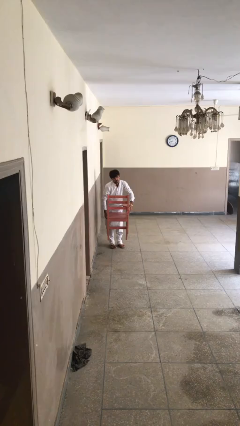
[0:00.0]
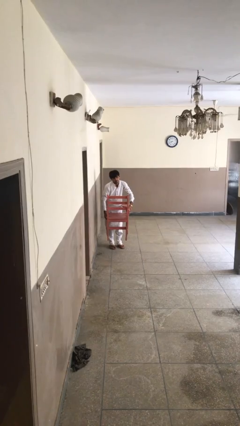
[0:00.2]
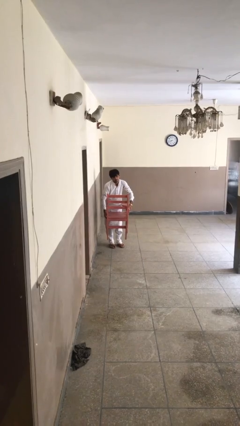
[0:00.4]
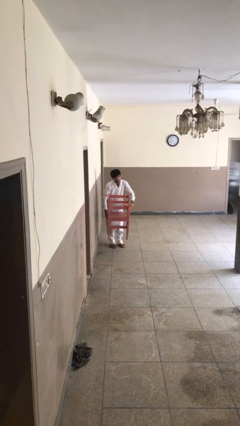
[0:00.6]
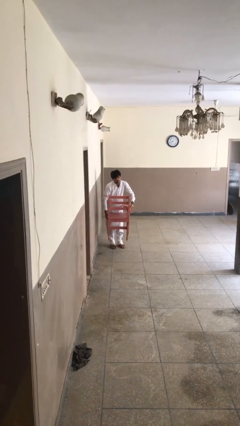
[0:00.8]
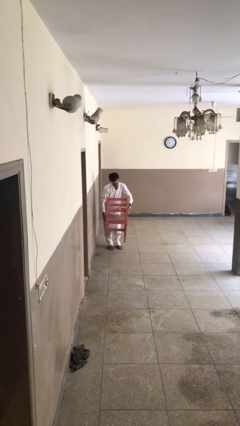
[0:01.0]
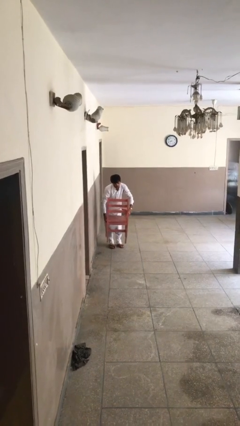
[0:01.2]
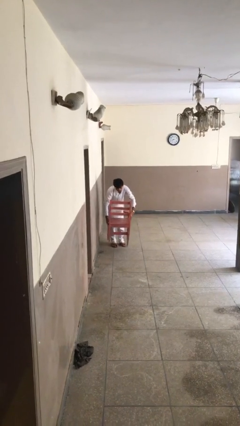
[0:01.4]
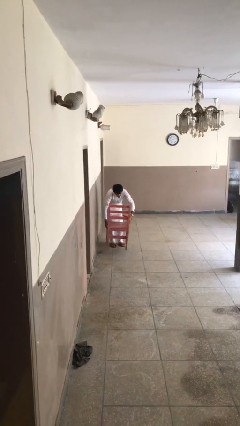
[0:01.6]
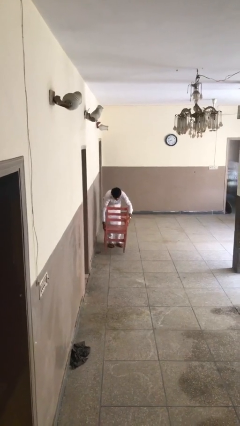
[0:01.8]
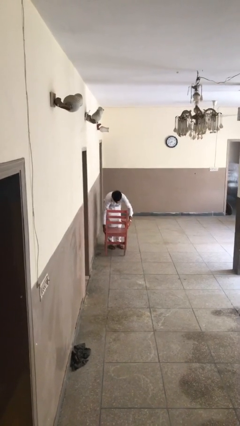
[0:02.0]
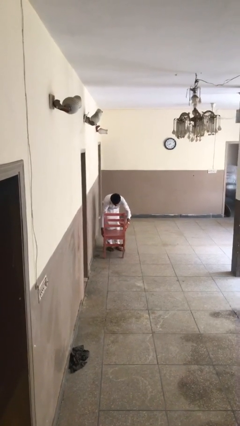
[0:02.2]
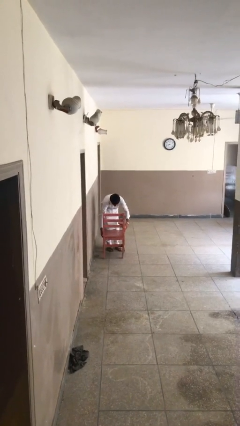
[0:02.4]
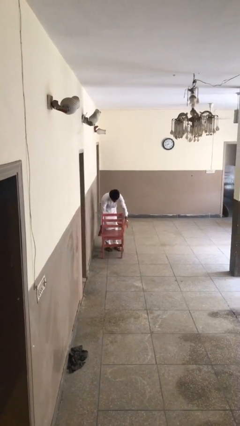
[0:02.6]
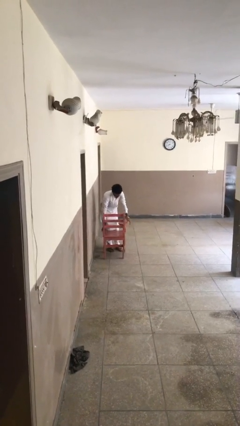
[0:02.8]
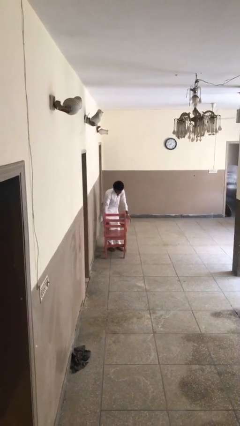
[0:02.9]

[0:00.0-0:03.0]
person puts down object on floor

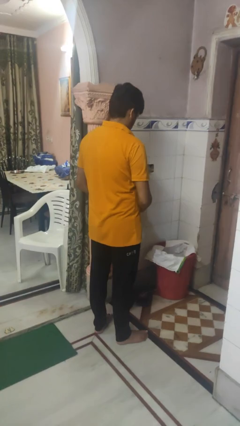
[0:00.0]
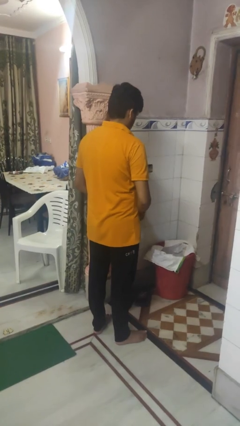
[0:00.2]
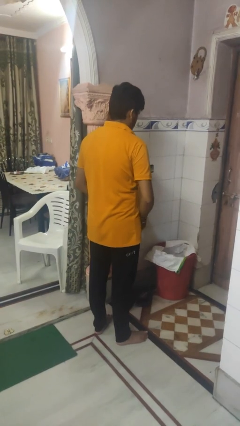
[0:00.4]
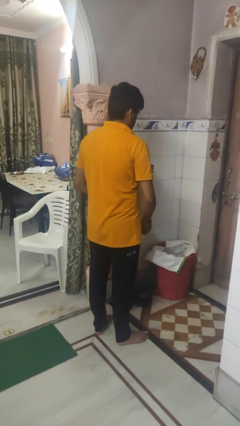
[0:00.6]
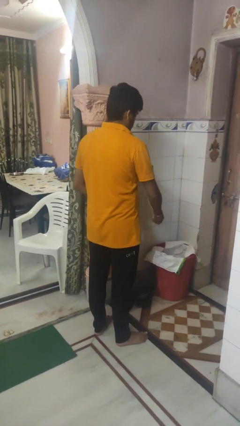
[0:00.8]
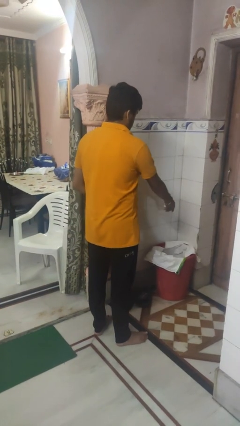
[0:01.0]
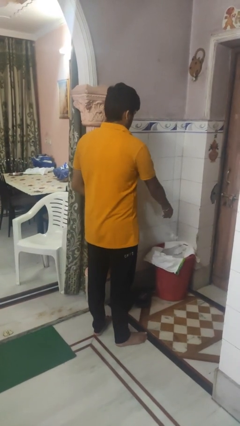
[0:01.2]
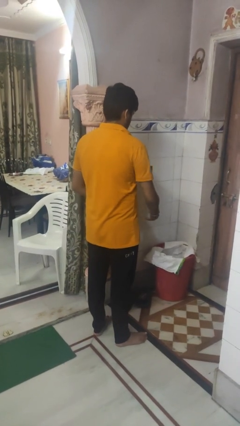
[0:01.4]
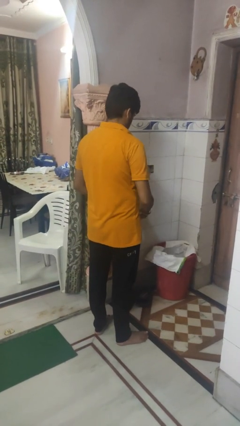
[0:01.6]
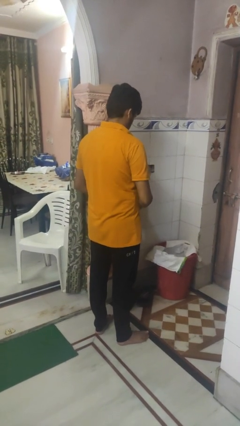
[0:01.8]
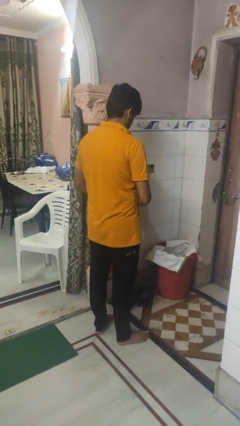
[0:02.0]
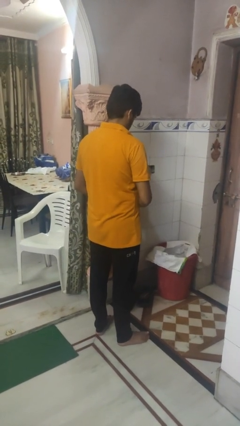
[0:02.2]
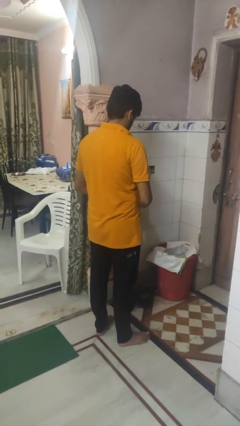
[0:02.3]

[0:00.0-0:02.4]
person discards trash

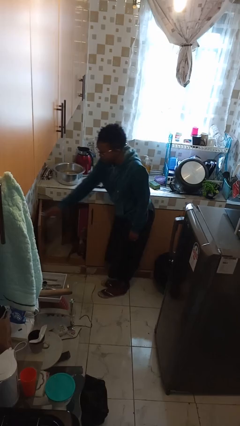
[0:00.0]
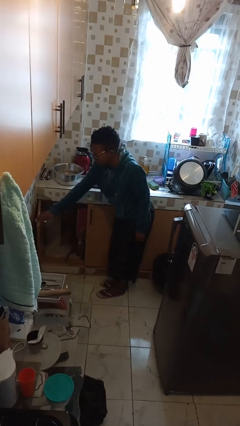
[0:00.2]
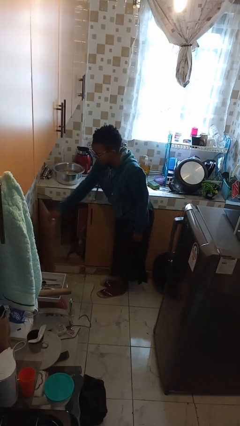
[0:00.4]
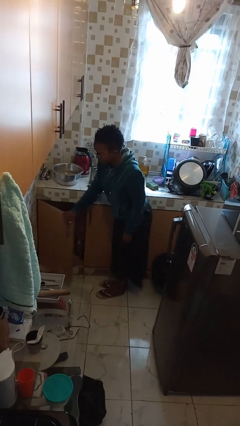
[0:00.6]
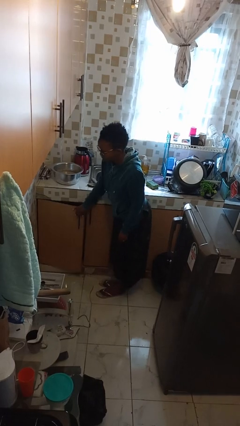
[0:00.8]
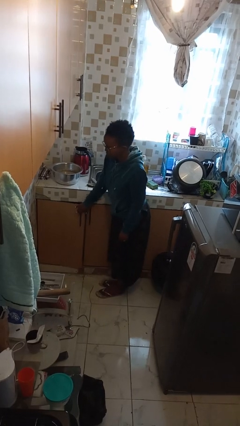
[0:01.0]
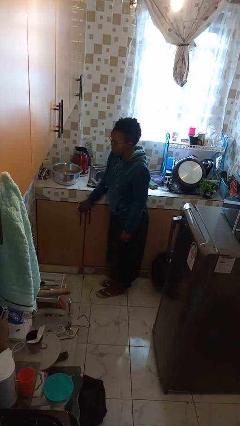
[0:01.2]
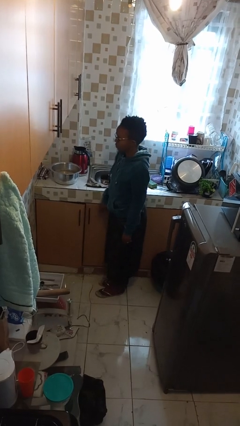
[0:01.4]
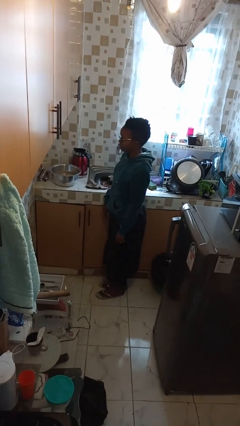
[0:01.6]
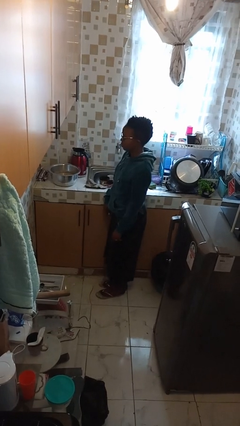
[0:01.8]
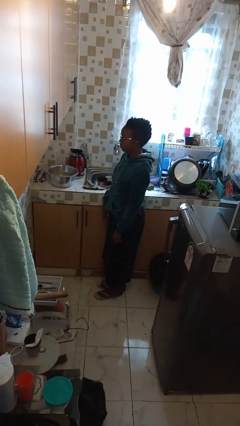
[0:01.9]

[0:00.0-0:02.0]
person closes cabinet

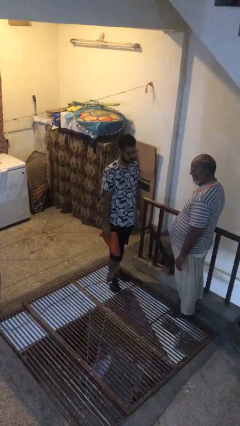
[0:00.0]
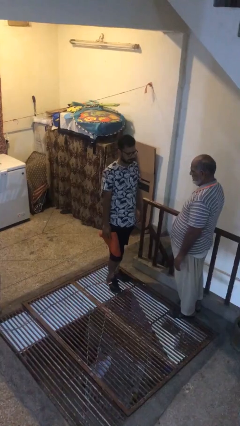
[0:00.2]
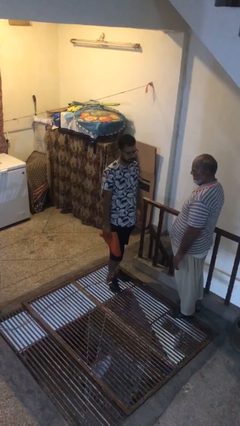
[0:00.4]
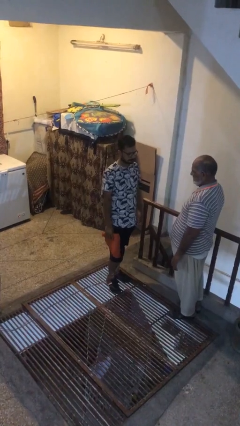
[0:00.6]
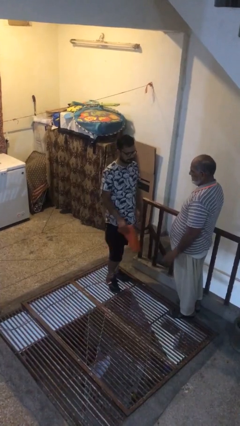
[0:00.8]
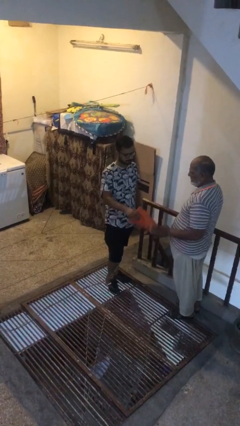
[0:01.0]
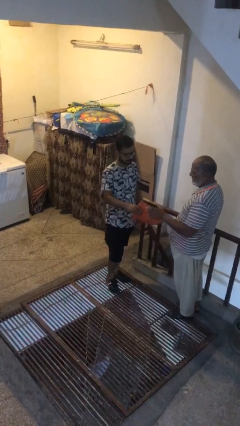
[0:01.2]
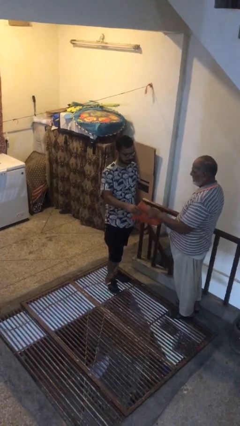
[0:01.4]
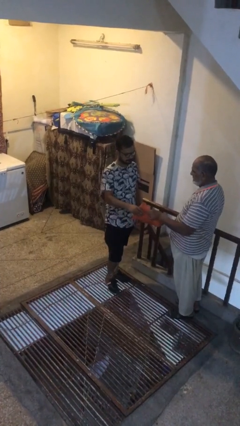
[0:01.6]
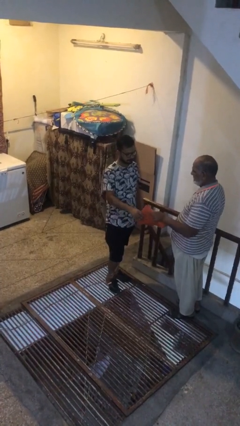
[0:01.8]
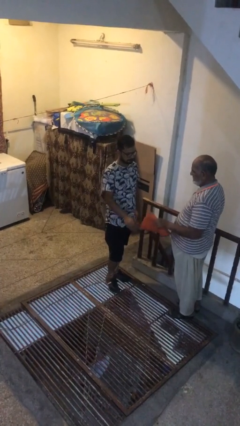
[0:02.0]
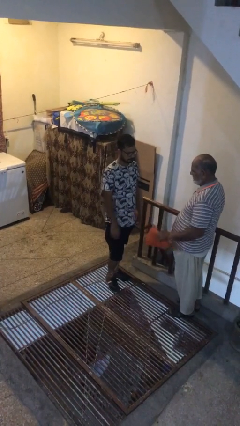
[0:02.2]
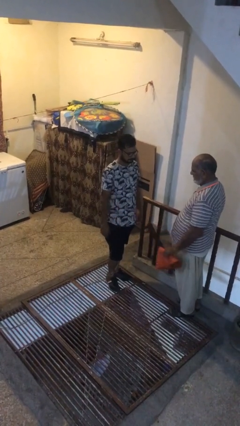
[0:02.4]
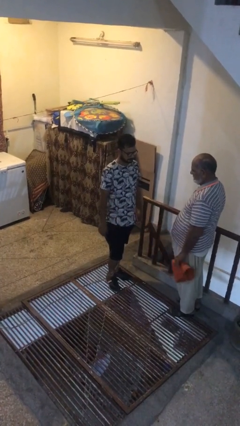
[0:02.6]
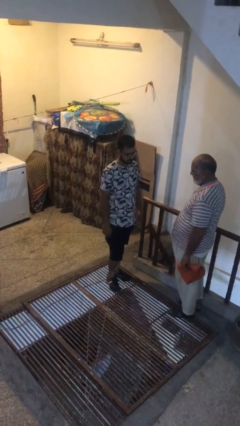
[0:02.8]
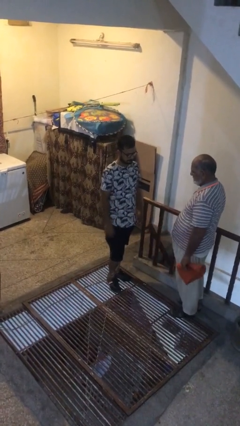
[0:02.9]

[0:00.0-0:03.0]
person transfers object to person

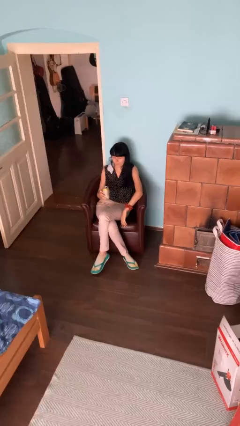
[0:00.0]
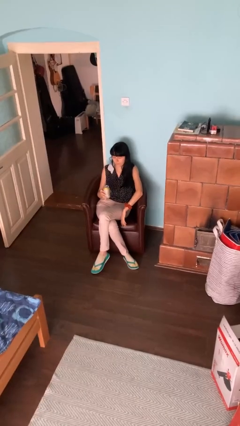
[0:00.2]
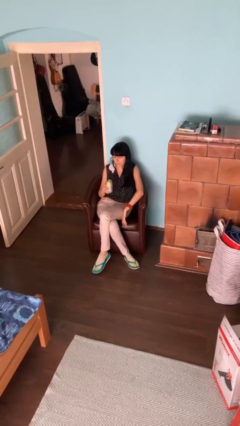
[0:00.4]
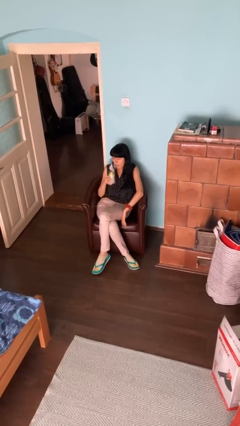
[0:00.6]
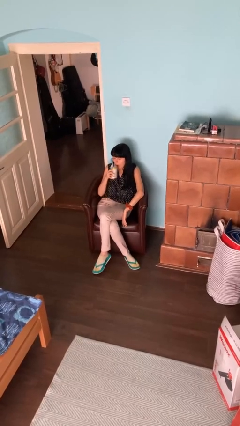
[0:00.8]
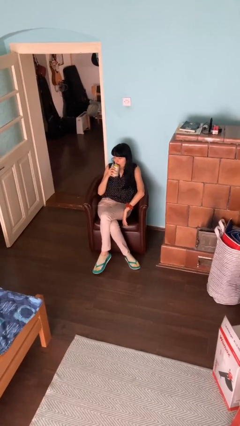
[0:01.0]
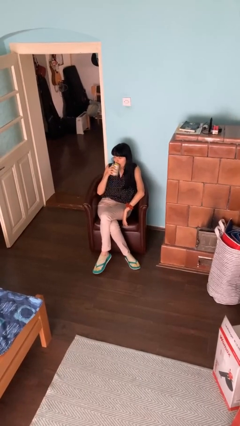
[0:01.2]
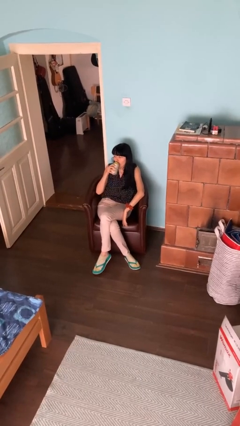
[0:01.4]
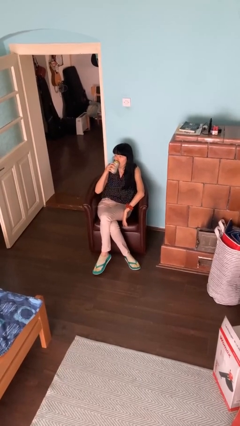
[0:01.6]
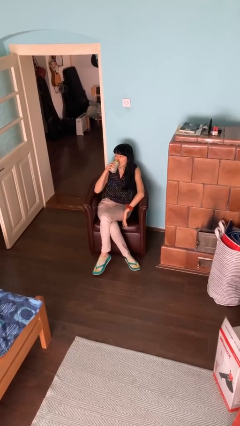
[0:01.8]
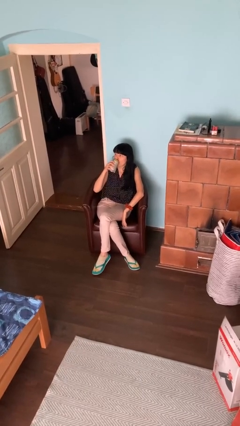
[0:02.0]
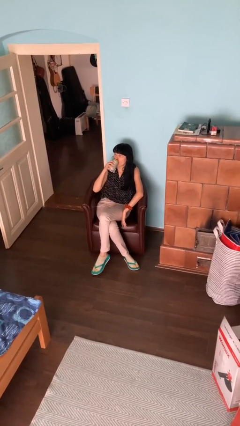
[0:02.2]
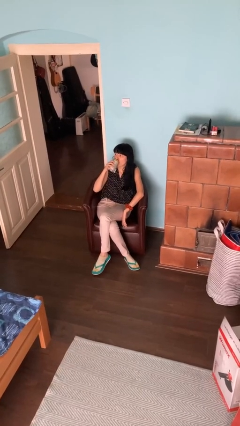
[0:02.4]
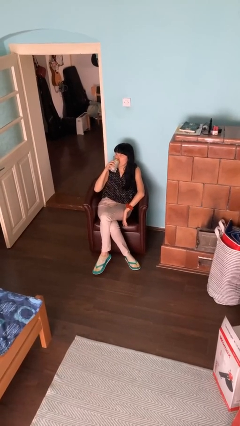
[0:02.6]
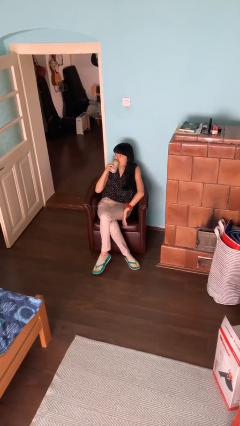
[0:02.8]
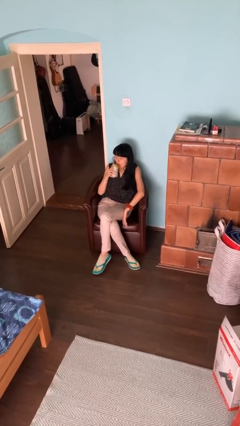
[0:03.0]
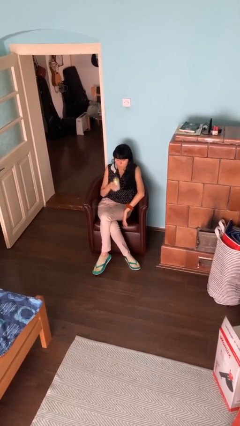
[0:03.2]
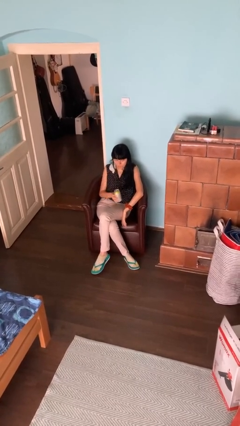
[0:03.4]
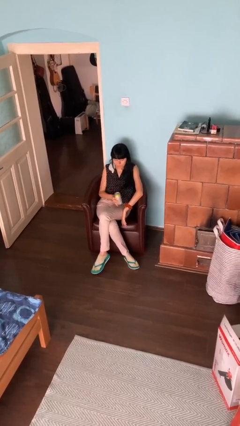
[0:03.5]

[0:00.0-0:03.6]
person drinks from beverage can

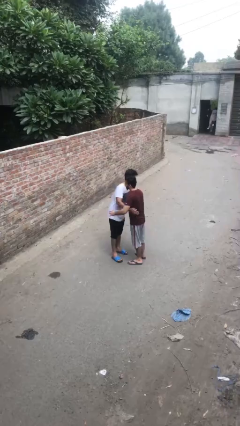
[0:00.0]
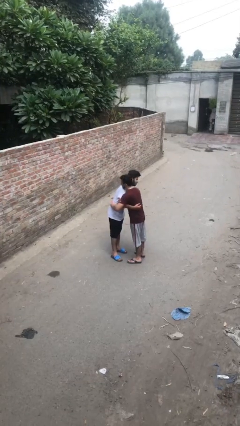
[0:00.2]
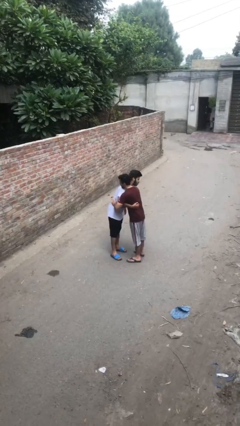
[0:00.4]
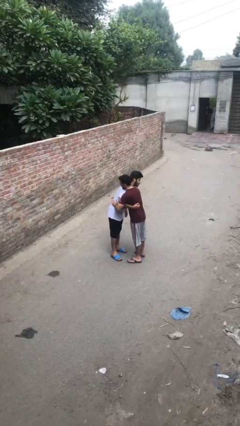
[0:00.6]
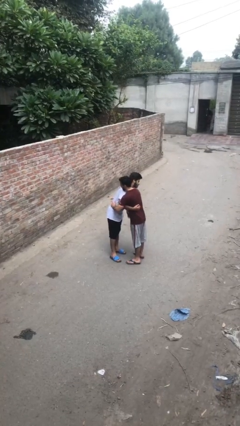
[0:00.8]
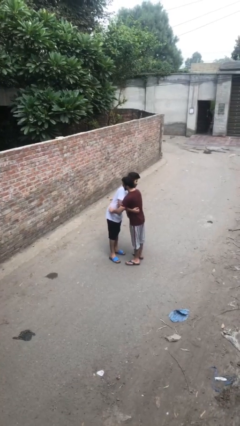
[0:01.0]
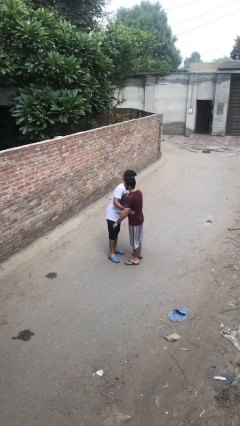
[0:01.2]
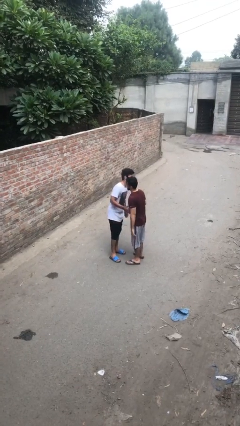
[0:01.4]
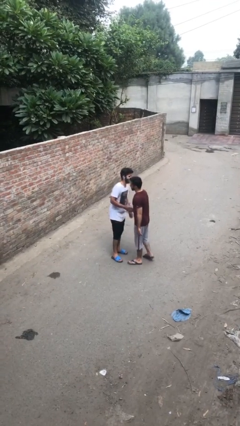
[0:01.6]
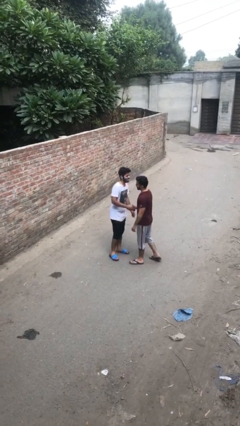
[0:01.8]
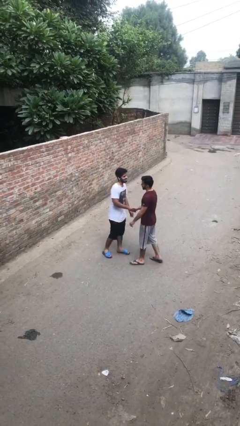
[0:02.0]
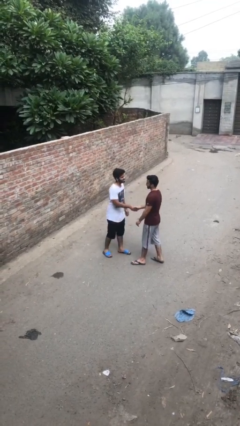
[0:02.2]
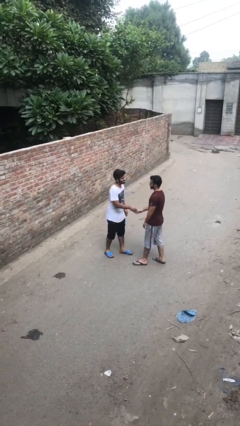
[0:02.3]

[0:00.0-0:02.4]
person embraces person

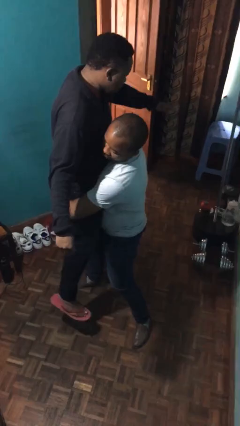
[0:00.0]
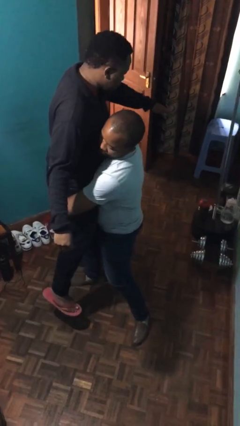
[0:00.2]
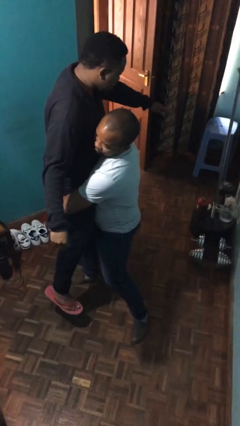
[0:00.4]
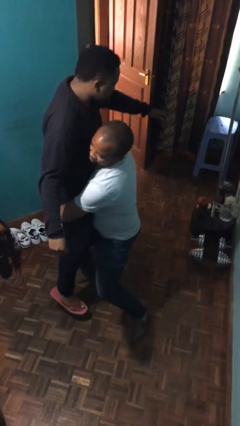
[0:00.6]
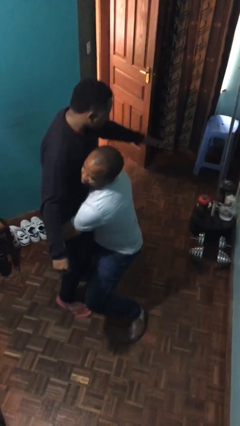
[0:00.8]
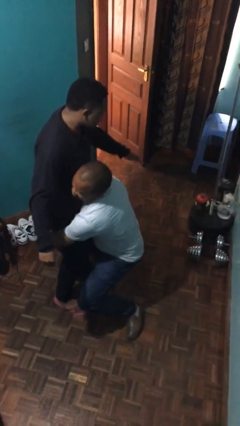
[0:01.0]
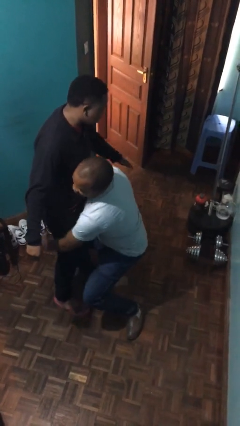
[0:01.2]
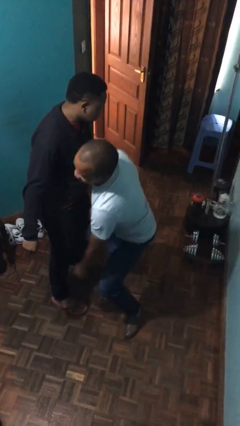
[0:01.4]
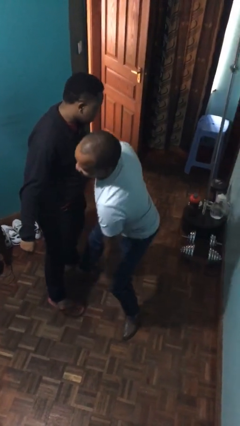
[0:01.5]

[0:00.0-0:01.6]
person puts down person
